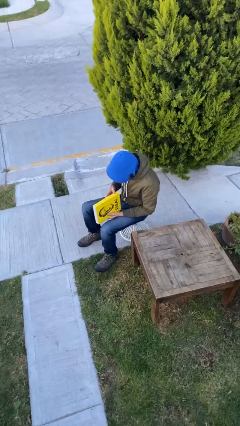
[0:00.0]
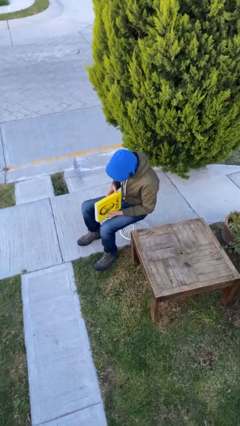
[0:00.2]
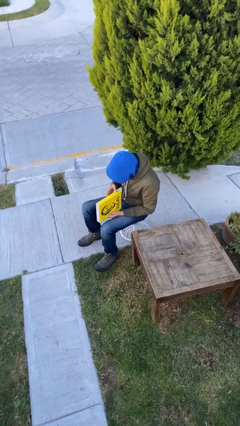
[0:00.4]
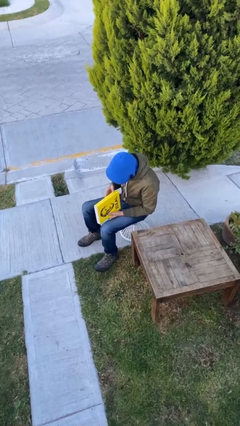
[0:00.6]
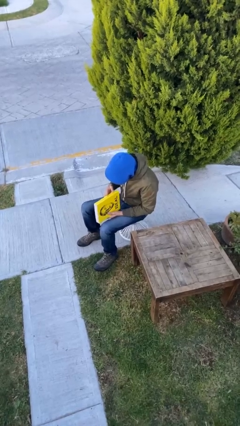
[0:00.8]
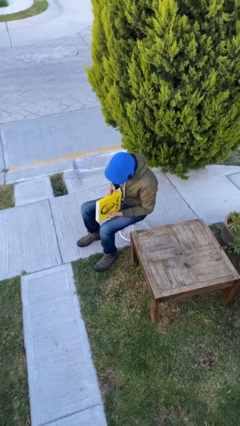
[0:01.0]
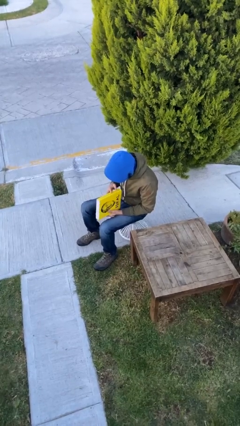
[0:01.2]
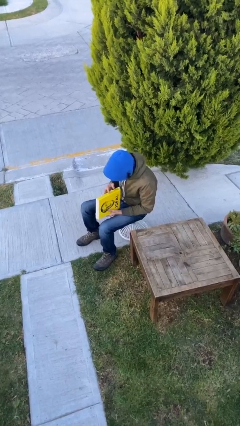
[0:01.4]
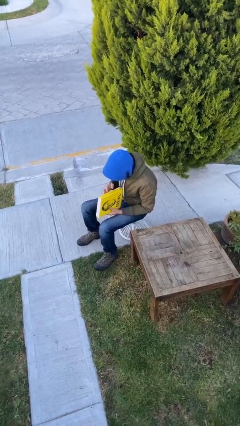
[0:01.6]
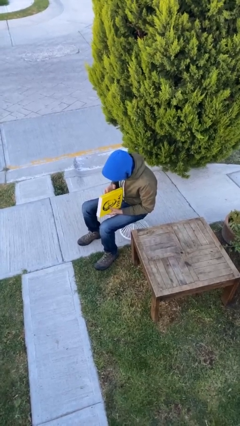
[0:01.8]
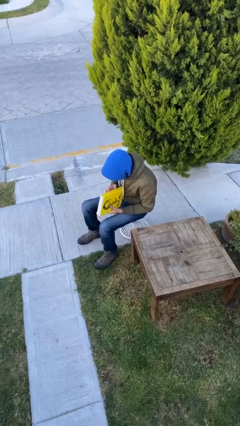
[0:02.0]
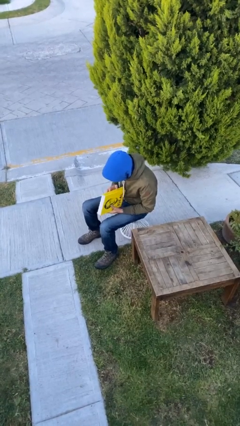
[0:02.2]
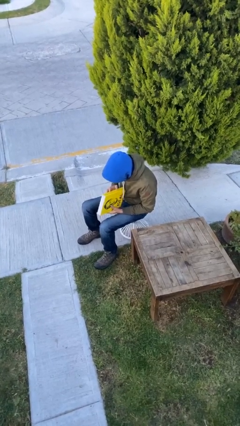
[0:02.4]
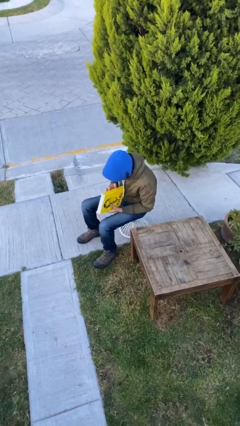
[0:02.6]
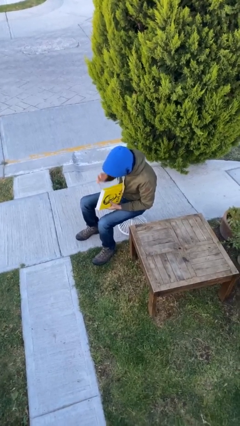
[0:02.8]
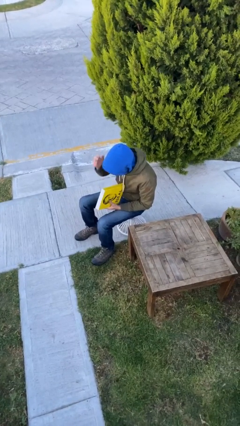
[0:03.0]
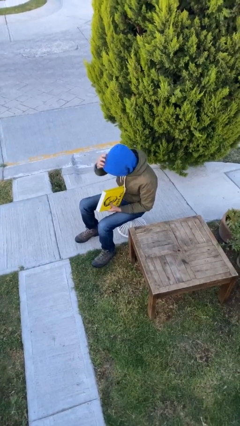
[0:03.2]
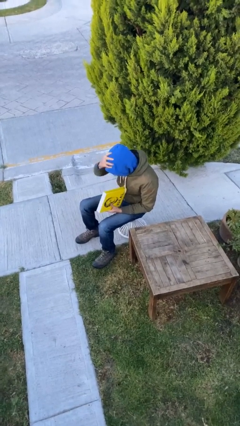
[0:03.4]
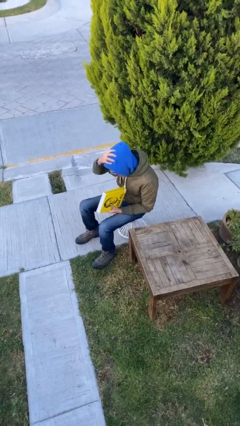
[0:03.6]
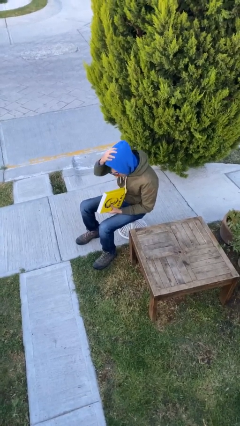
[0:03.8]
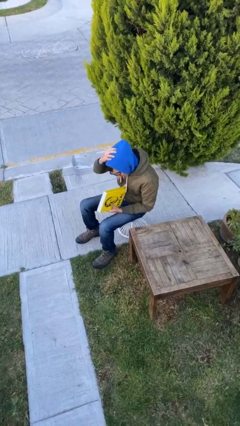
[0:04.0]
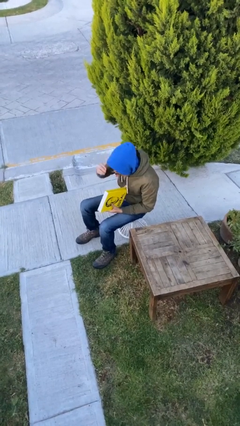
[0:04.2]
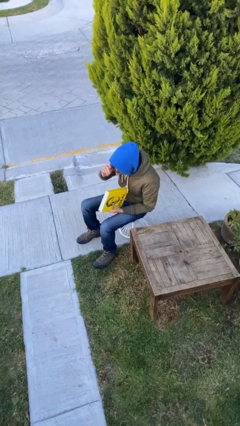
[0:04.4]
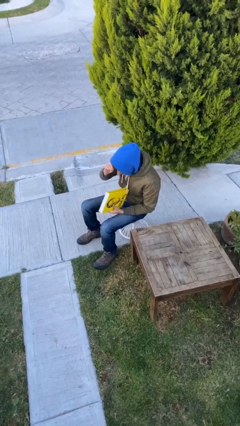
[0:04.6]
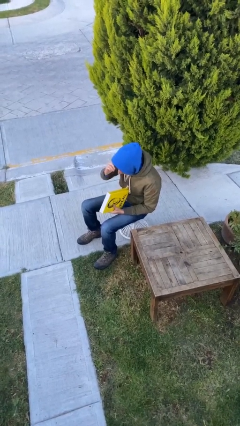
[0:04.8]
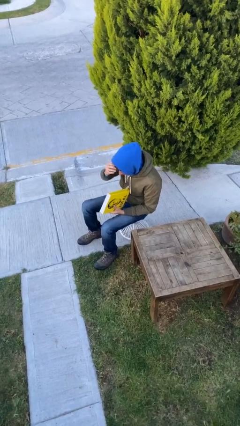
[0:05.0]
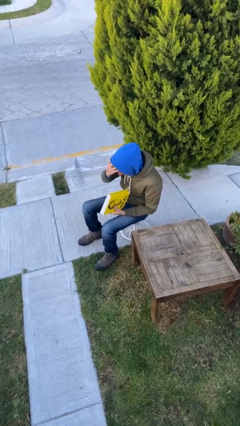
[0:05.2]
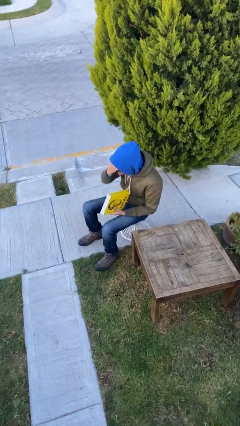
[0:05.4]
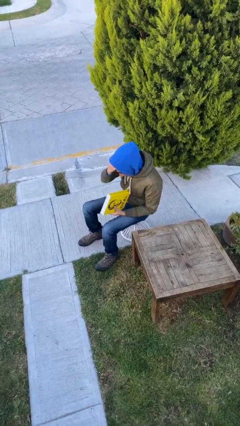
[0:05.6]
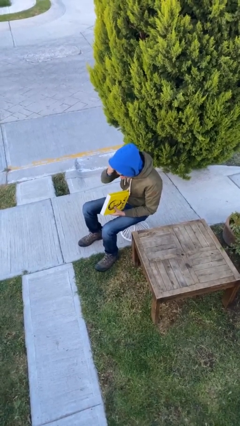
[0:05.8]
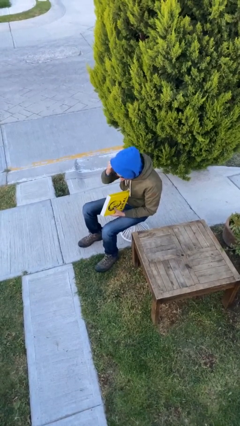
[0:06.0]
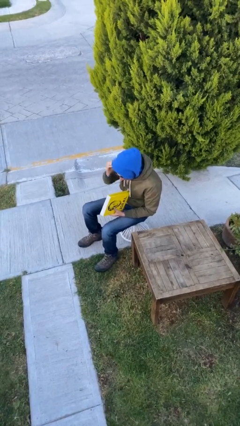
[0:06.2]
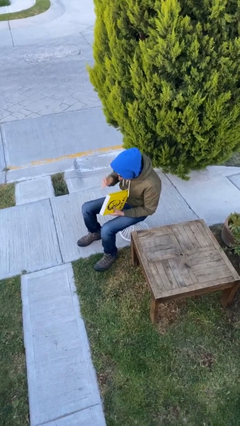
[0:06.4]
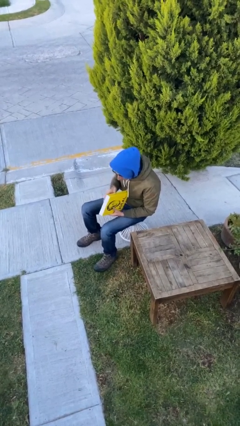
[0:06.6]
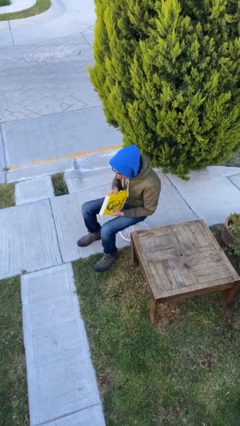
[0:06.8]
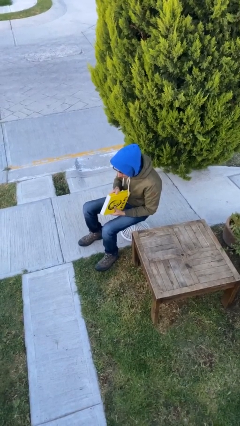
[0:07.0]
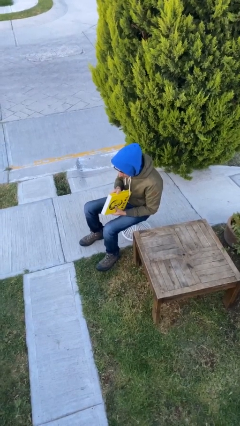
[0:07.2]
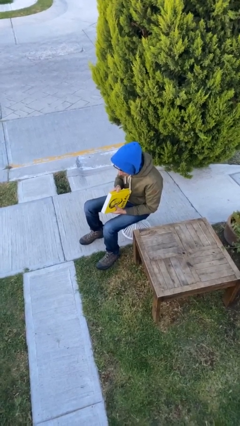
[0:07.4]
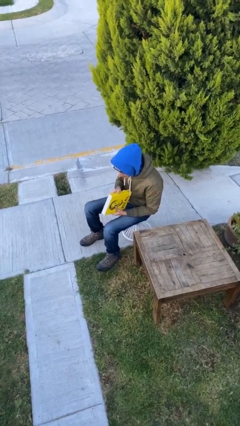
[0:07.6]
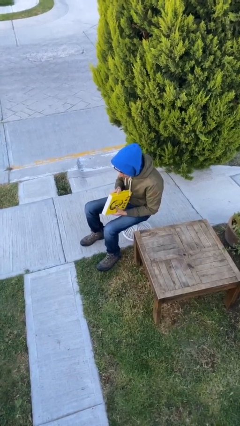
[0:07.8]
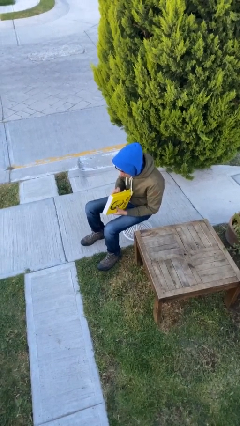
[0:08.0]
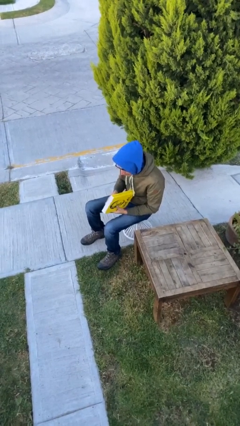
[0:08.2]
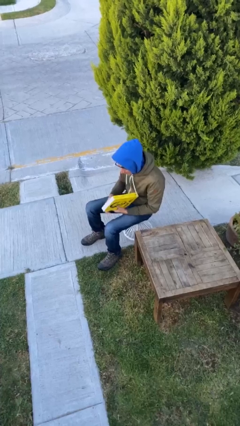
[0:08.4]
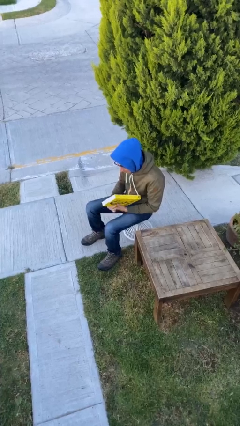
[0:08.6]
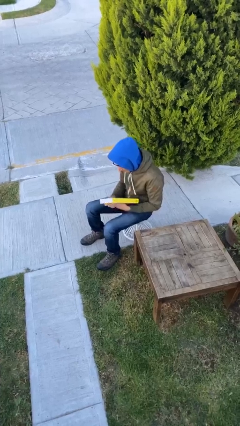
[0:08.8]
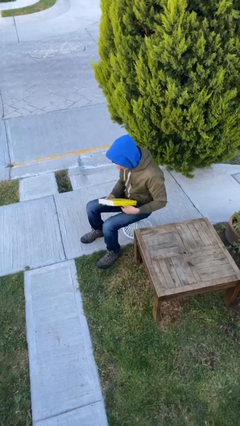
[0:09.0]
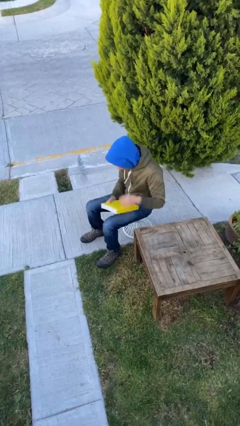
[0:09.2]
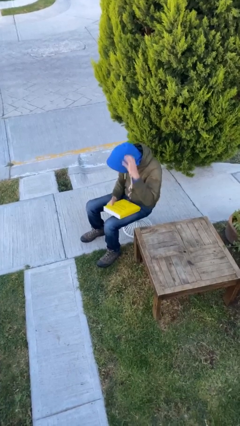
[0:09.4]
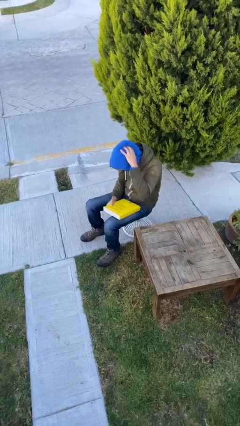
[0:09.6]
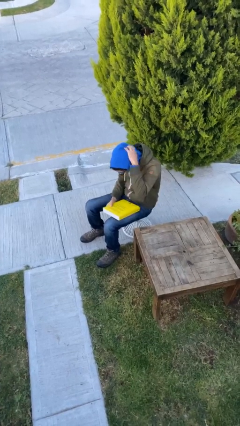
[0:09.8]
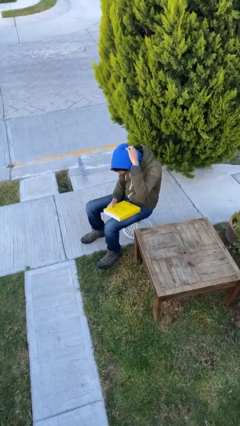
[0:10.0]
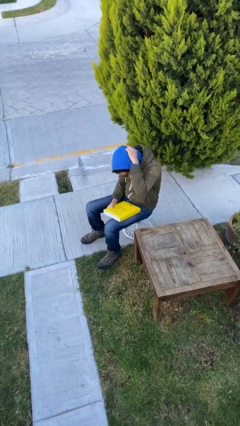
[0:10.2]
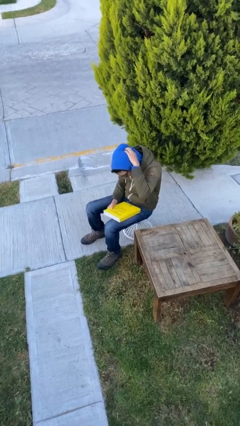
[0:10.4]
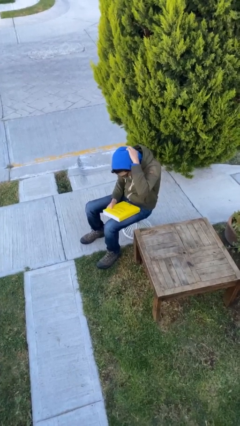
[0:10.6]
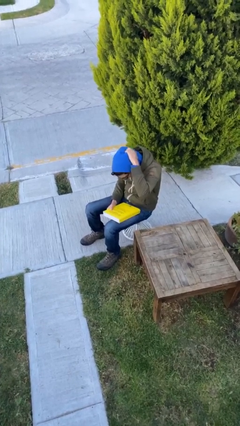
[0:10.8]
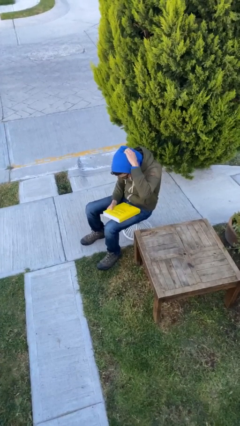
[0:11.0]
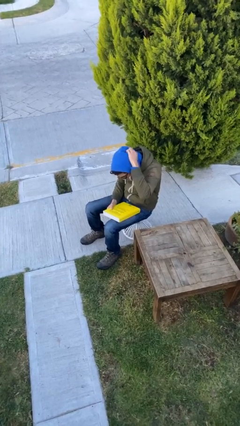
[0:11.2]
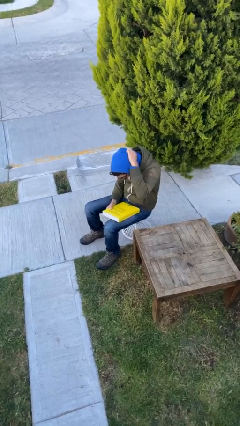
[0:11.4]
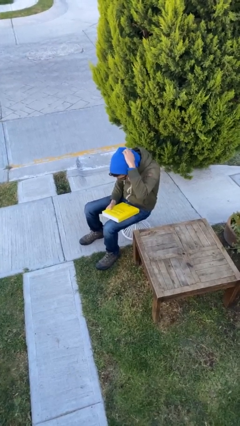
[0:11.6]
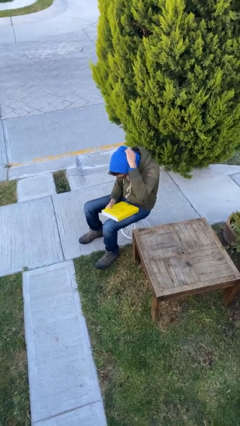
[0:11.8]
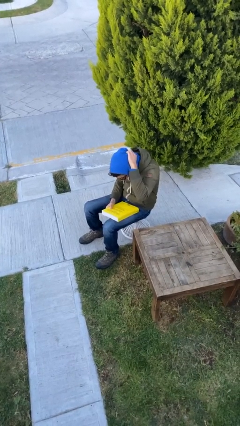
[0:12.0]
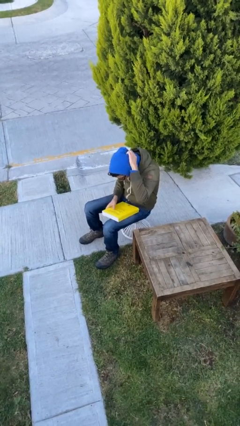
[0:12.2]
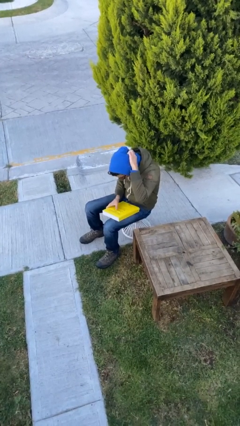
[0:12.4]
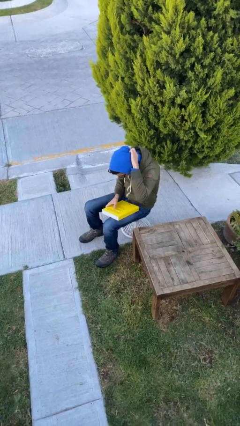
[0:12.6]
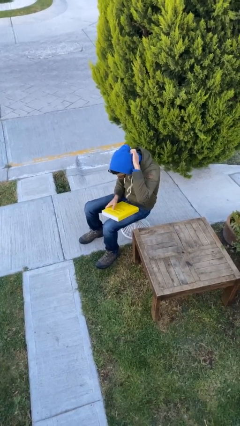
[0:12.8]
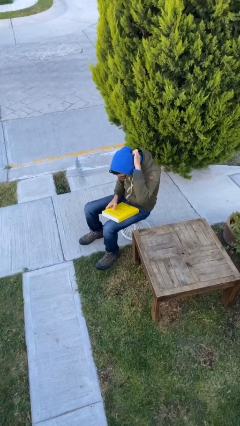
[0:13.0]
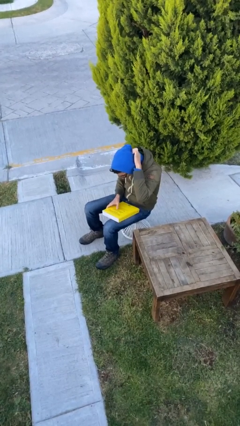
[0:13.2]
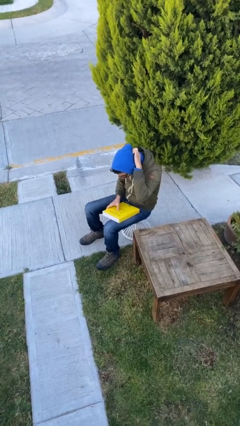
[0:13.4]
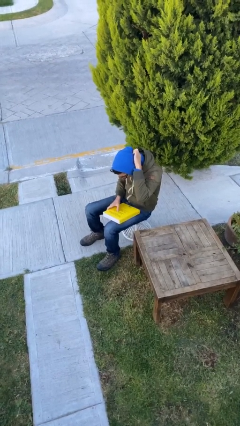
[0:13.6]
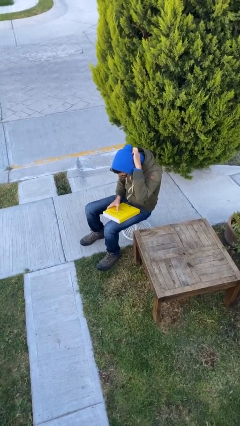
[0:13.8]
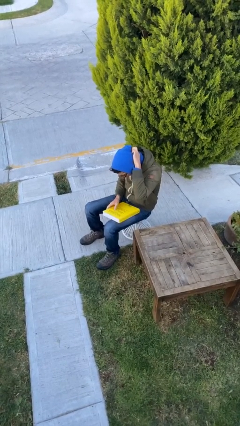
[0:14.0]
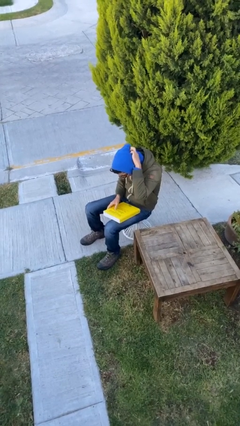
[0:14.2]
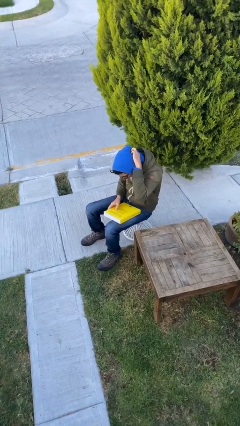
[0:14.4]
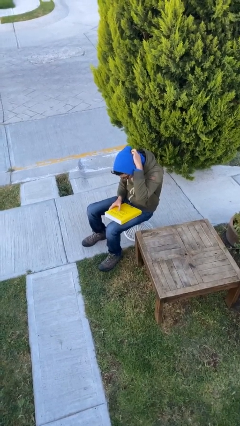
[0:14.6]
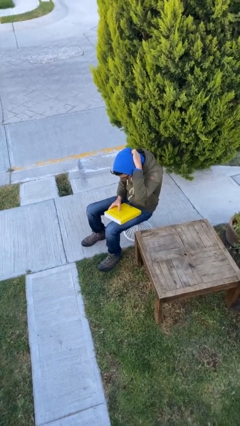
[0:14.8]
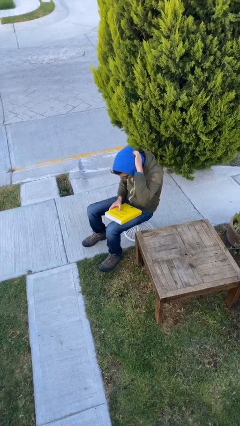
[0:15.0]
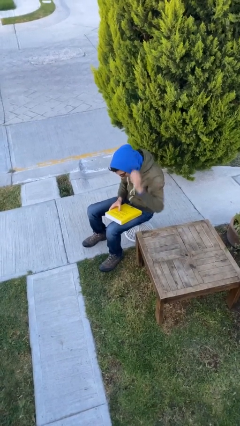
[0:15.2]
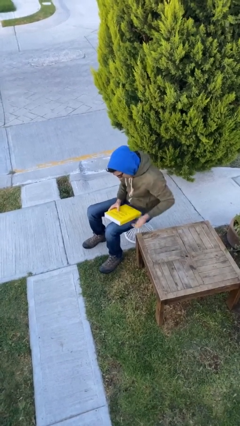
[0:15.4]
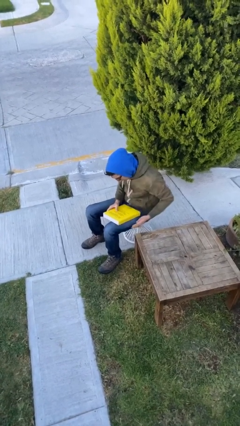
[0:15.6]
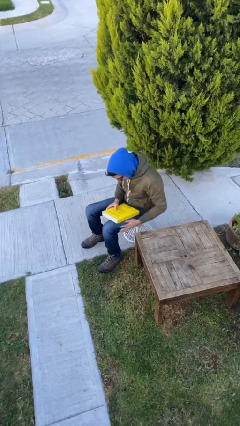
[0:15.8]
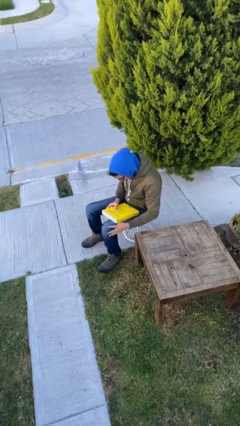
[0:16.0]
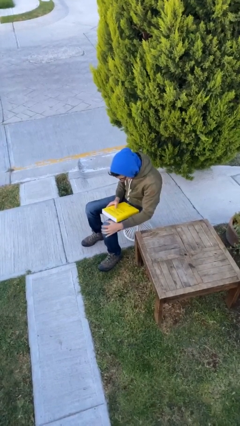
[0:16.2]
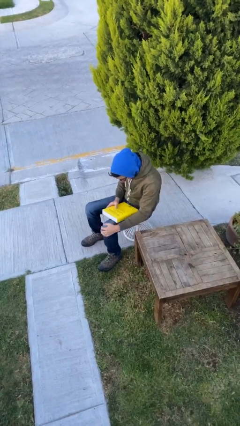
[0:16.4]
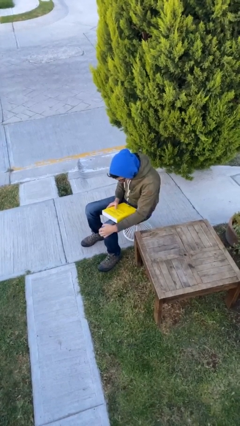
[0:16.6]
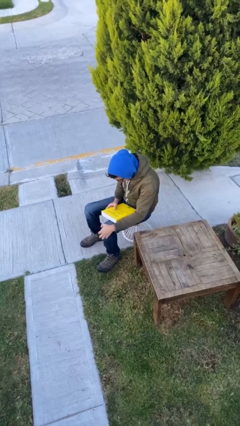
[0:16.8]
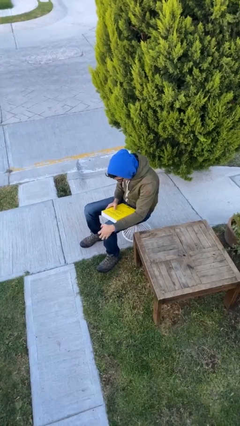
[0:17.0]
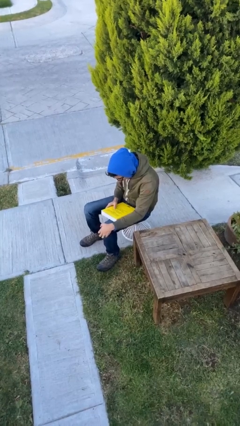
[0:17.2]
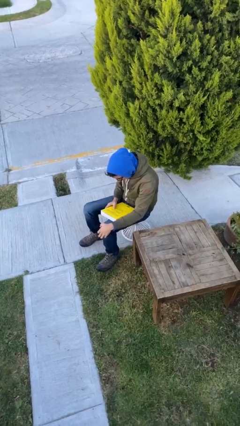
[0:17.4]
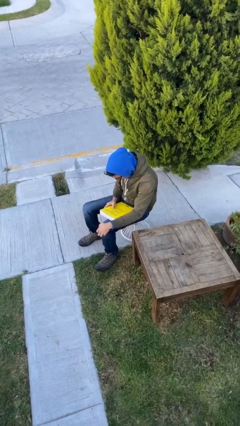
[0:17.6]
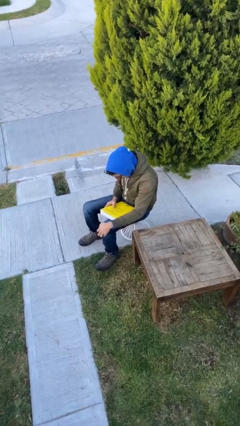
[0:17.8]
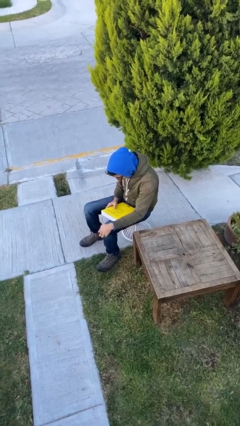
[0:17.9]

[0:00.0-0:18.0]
person reads document

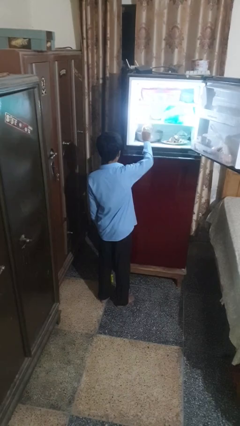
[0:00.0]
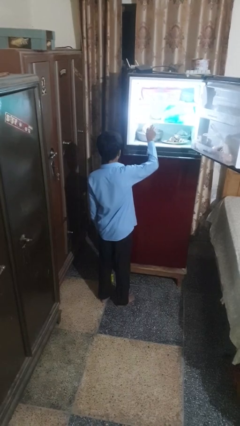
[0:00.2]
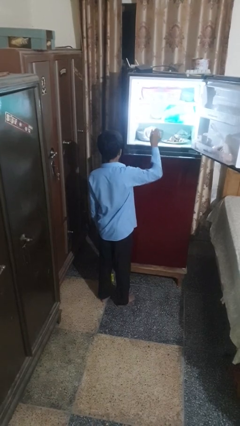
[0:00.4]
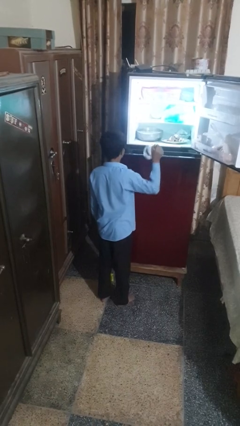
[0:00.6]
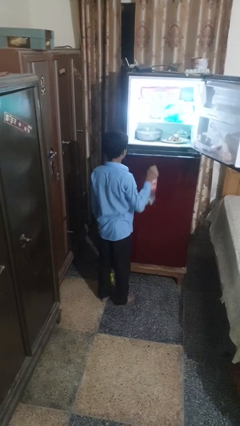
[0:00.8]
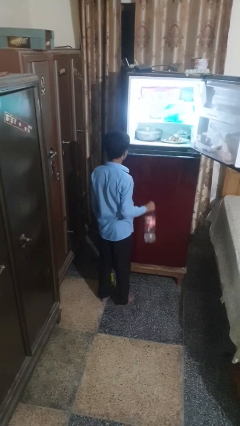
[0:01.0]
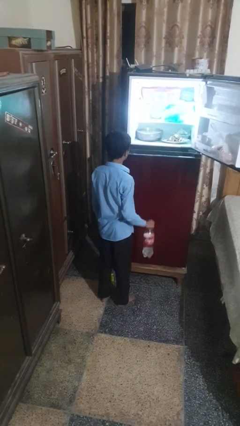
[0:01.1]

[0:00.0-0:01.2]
person takes object from refrigerator
